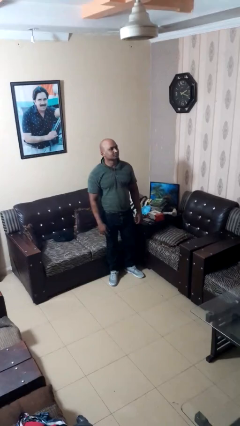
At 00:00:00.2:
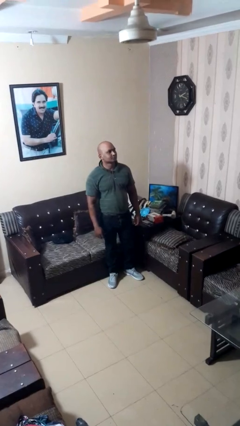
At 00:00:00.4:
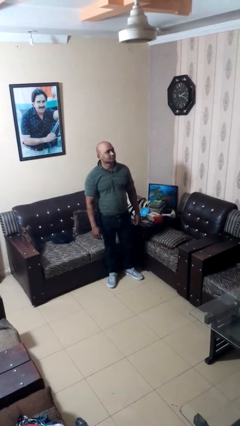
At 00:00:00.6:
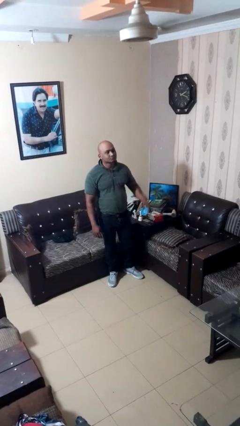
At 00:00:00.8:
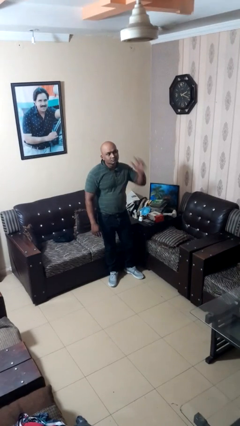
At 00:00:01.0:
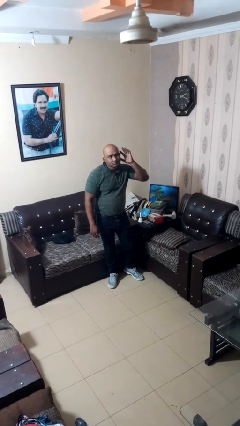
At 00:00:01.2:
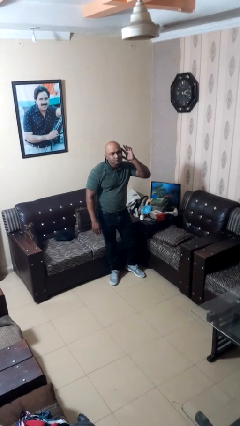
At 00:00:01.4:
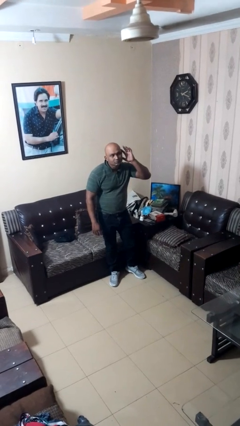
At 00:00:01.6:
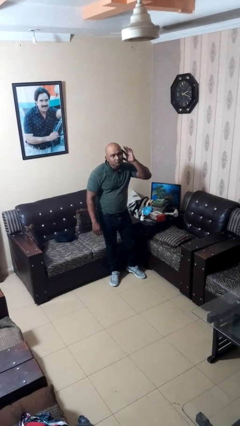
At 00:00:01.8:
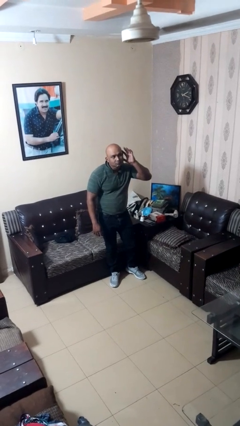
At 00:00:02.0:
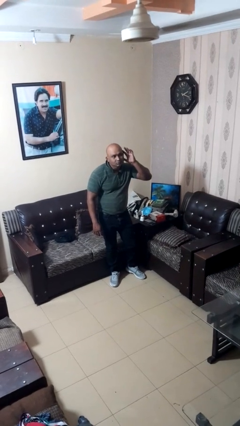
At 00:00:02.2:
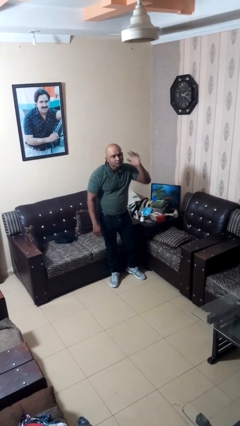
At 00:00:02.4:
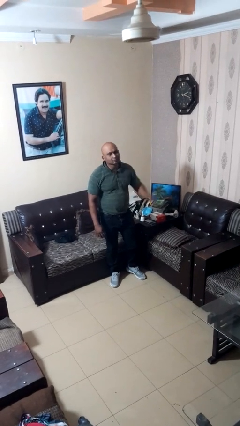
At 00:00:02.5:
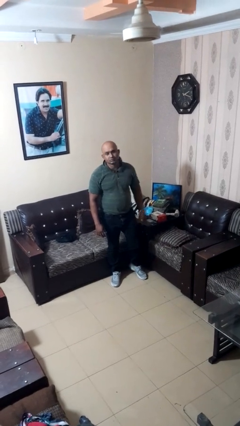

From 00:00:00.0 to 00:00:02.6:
person gestures listen closely

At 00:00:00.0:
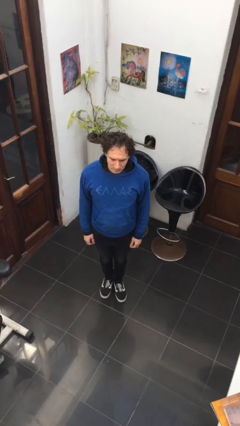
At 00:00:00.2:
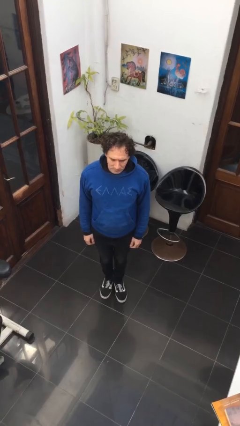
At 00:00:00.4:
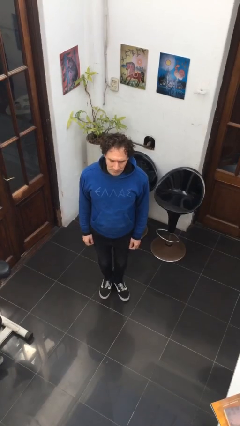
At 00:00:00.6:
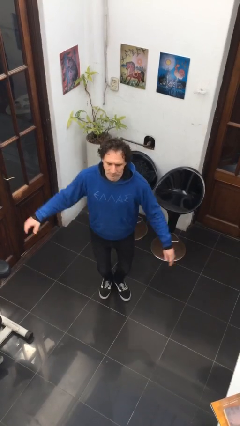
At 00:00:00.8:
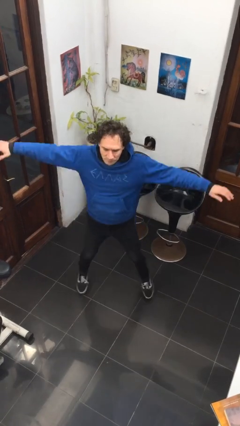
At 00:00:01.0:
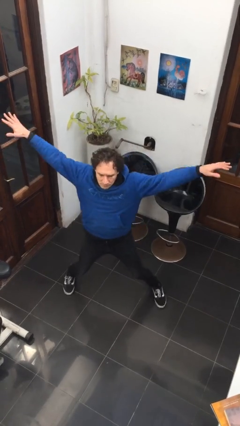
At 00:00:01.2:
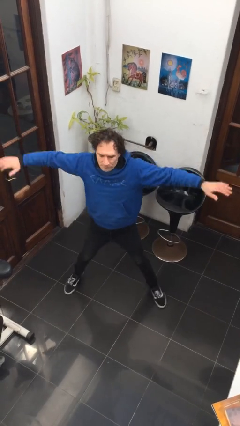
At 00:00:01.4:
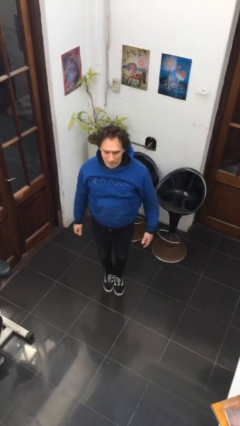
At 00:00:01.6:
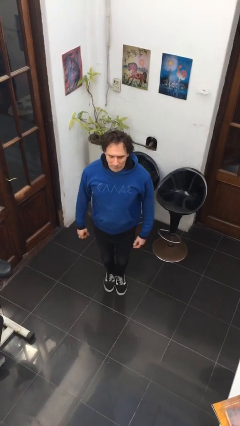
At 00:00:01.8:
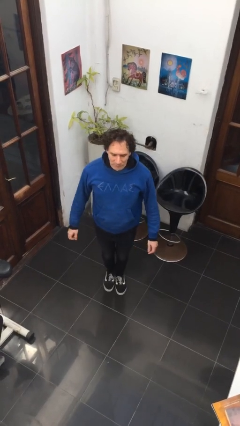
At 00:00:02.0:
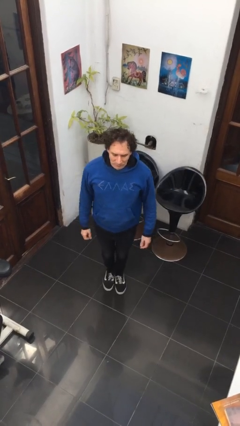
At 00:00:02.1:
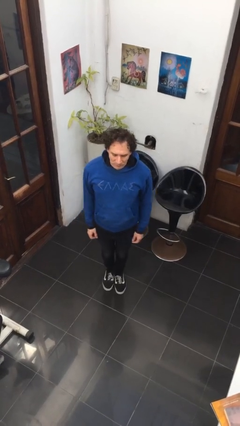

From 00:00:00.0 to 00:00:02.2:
person exercises with jumping jacks

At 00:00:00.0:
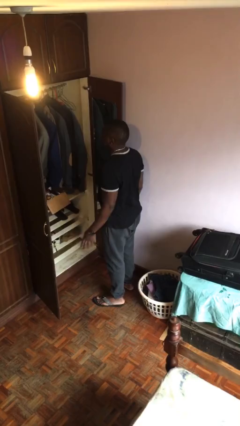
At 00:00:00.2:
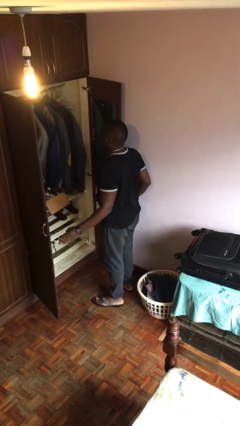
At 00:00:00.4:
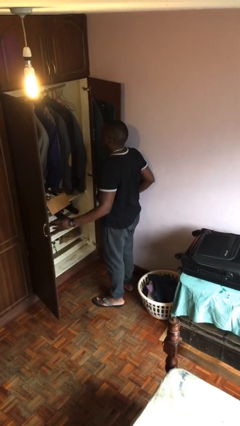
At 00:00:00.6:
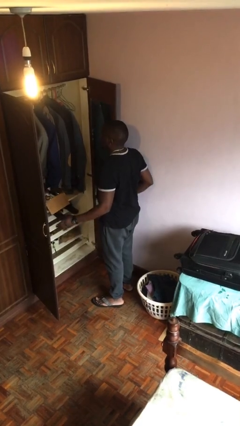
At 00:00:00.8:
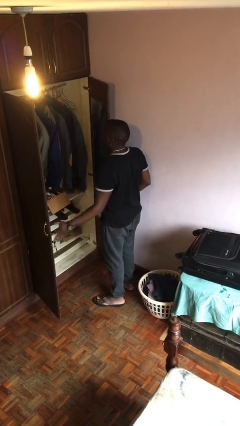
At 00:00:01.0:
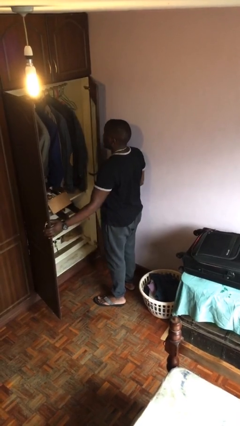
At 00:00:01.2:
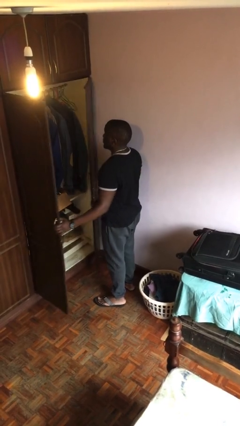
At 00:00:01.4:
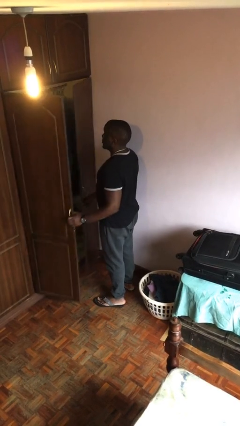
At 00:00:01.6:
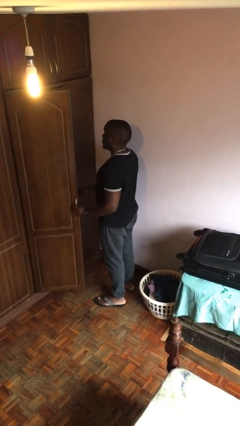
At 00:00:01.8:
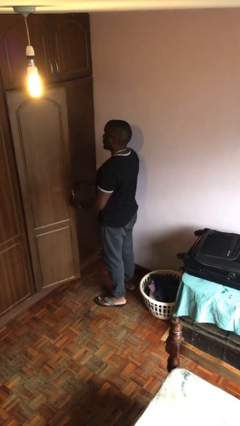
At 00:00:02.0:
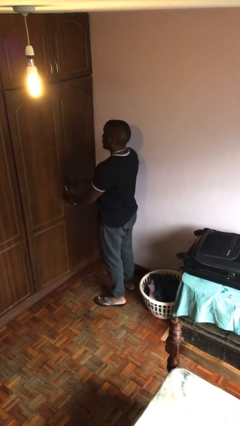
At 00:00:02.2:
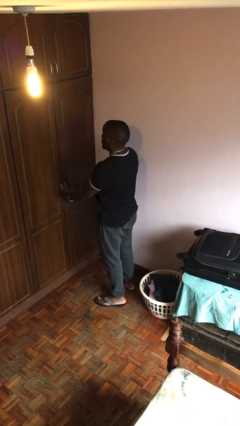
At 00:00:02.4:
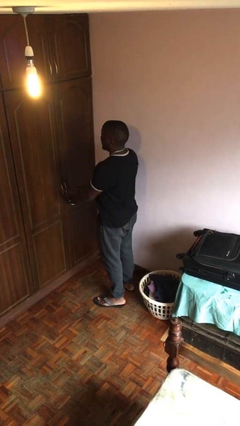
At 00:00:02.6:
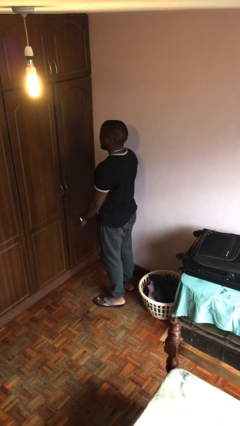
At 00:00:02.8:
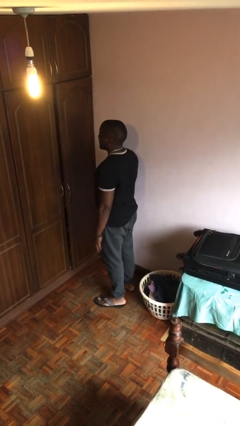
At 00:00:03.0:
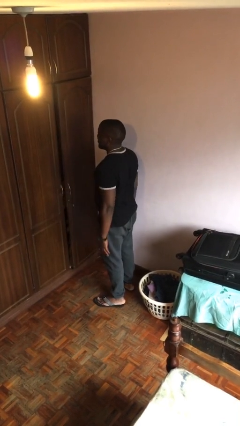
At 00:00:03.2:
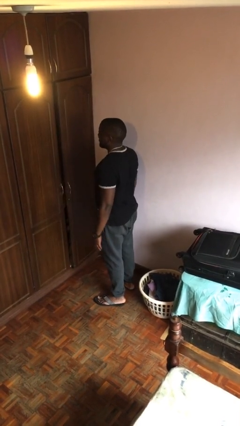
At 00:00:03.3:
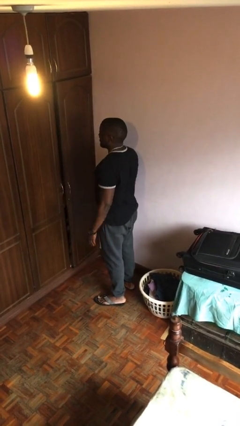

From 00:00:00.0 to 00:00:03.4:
person closes closet door

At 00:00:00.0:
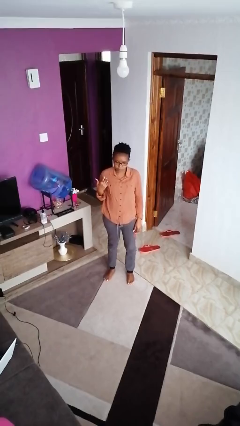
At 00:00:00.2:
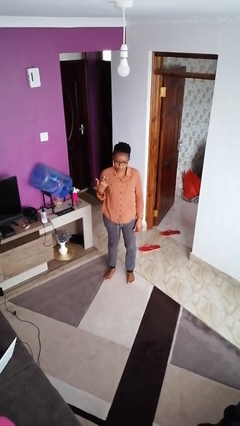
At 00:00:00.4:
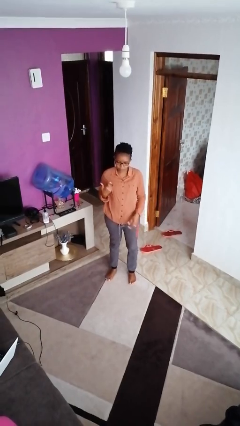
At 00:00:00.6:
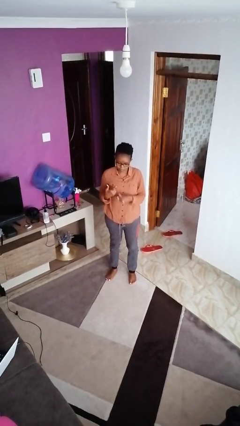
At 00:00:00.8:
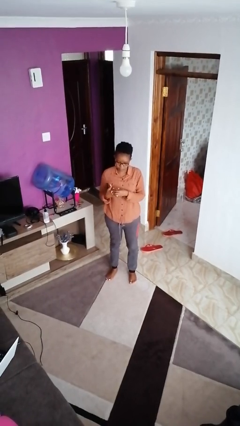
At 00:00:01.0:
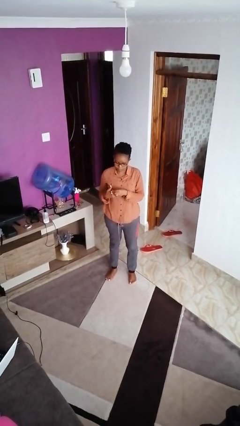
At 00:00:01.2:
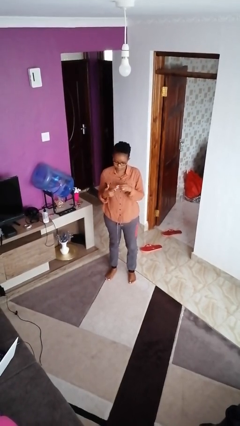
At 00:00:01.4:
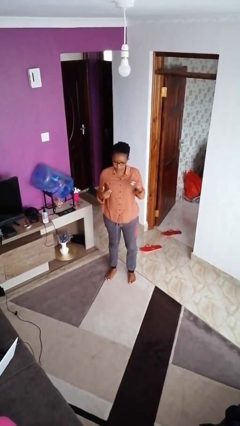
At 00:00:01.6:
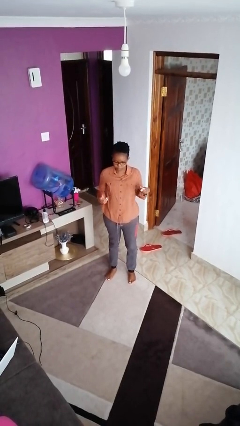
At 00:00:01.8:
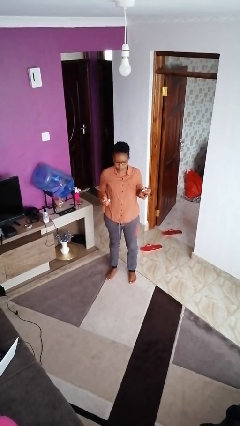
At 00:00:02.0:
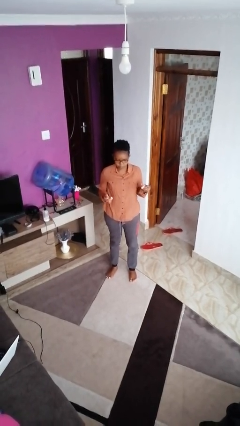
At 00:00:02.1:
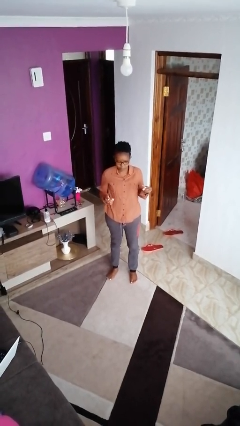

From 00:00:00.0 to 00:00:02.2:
person takes off ring

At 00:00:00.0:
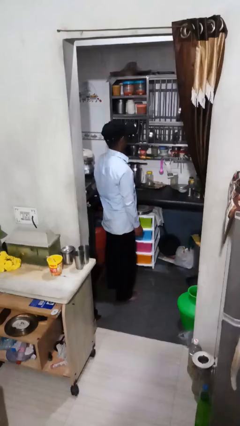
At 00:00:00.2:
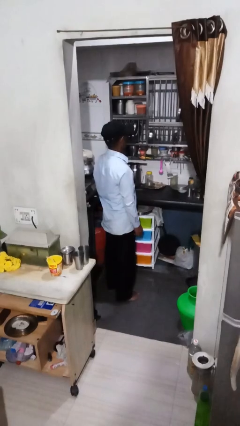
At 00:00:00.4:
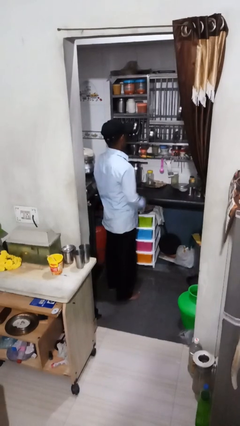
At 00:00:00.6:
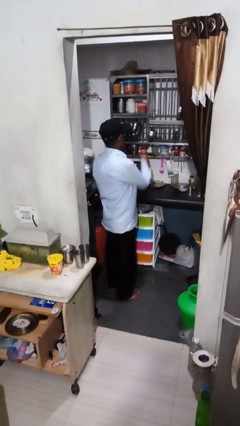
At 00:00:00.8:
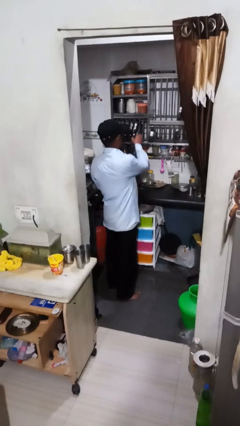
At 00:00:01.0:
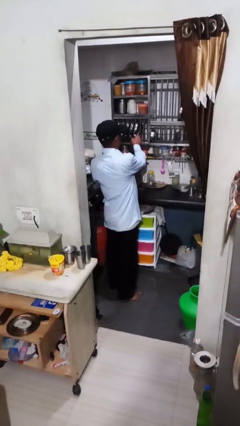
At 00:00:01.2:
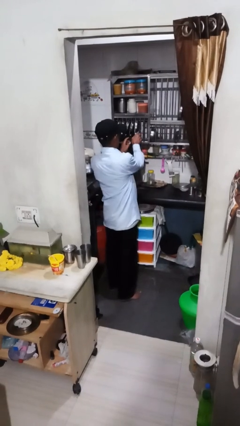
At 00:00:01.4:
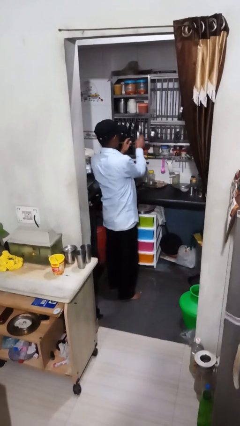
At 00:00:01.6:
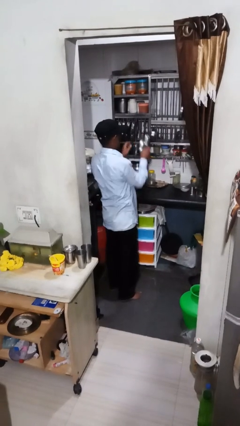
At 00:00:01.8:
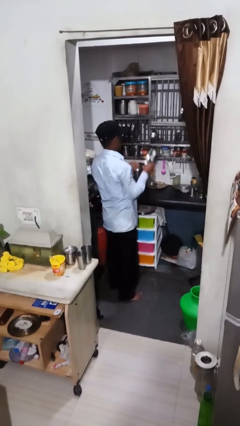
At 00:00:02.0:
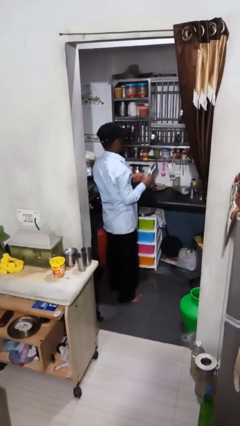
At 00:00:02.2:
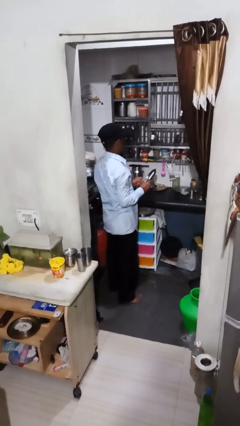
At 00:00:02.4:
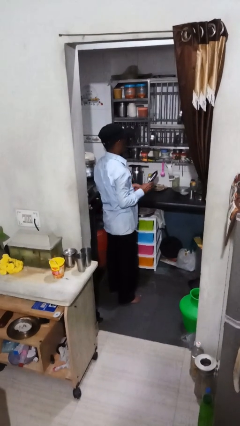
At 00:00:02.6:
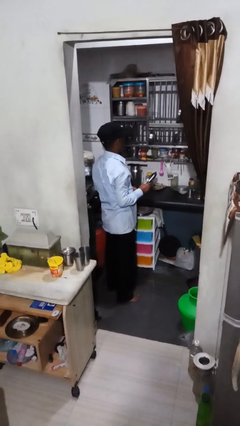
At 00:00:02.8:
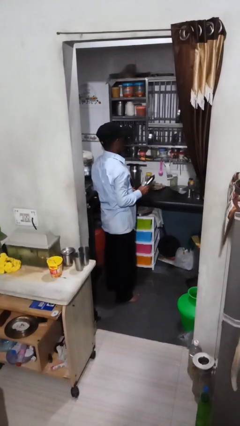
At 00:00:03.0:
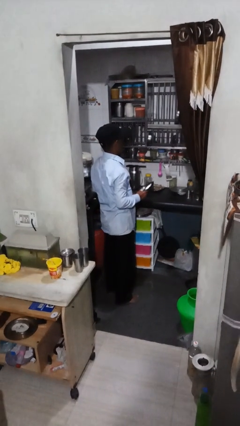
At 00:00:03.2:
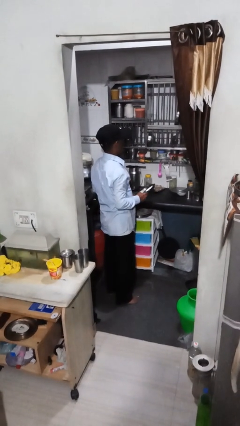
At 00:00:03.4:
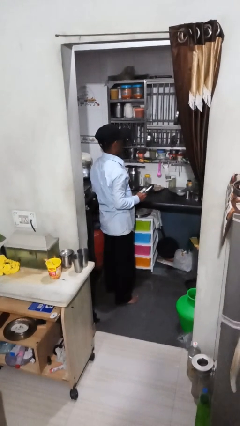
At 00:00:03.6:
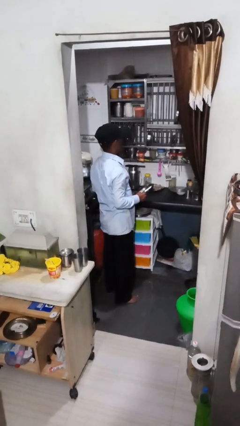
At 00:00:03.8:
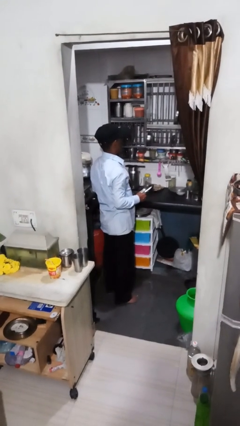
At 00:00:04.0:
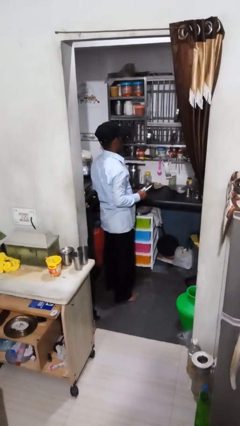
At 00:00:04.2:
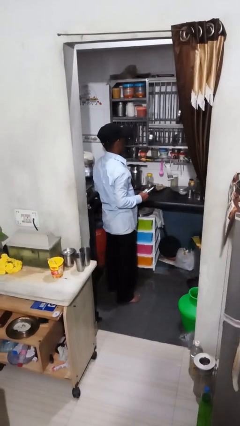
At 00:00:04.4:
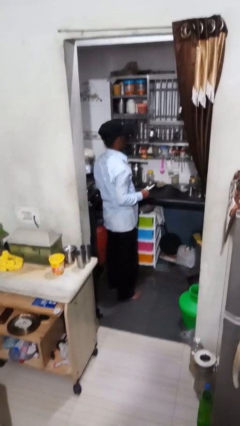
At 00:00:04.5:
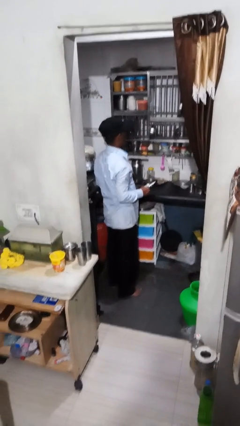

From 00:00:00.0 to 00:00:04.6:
person takes object from cabinet

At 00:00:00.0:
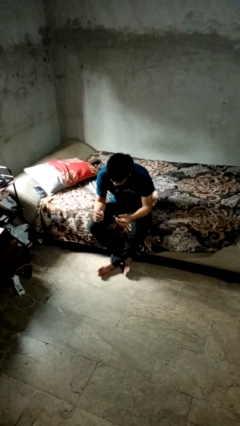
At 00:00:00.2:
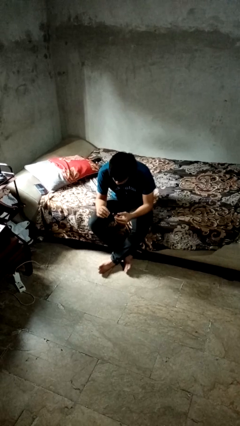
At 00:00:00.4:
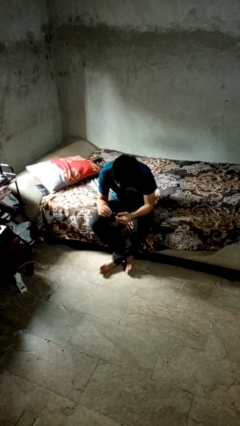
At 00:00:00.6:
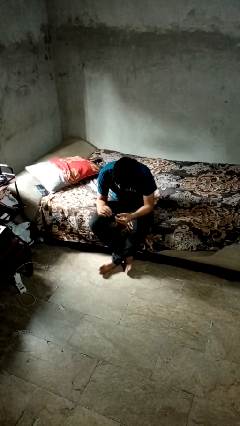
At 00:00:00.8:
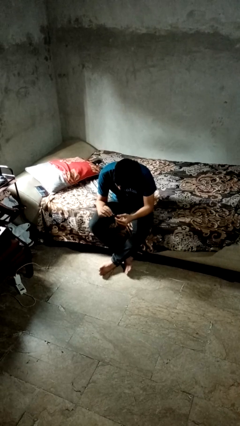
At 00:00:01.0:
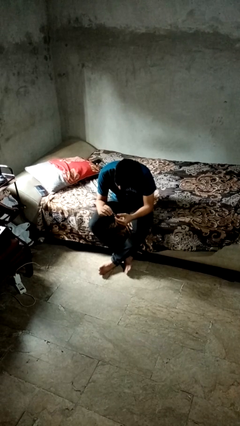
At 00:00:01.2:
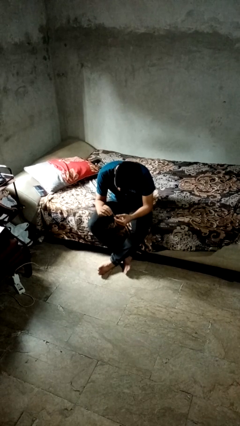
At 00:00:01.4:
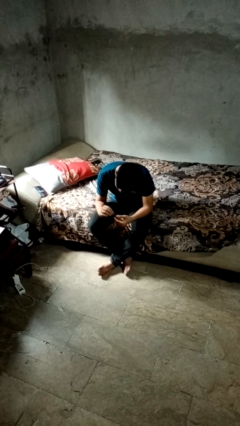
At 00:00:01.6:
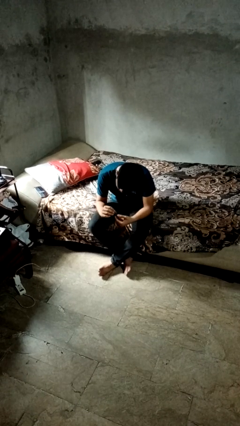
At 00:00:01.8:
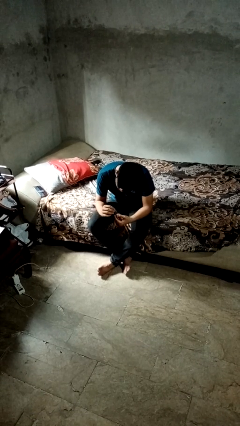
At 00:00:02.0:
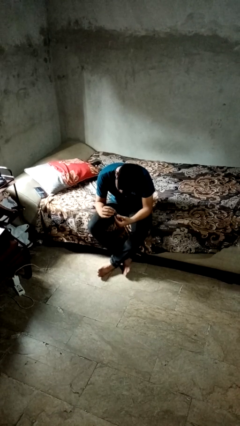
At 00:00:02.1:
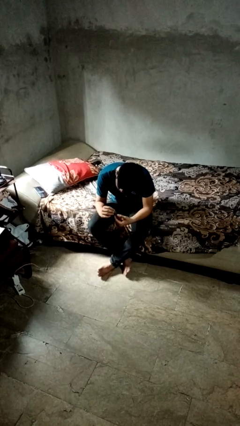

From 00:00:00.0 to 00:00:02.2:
person clips fingernails
